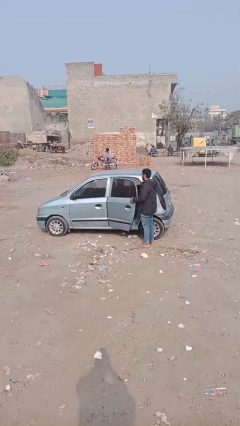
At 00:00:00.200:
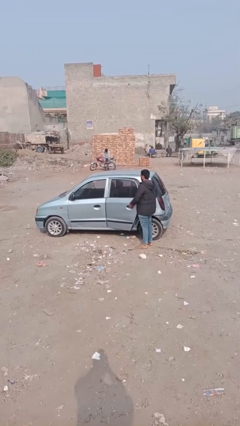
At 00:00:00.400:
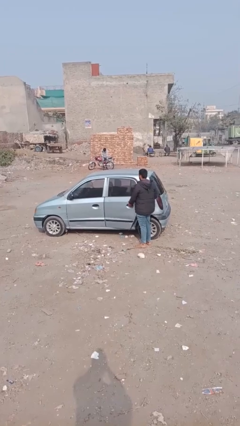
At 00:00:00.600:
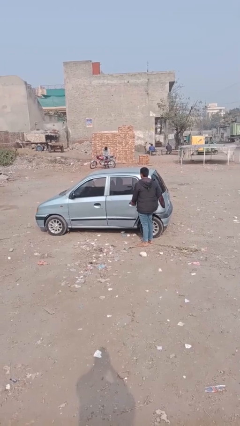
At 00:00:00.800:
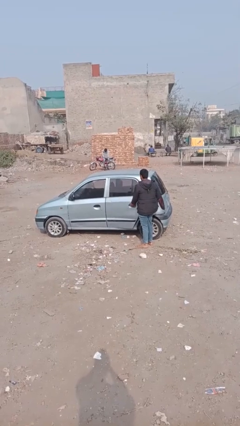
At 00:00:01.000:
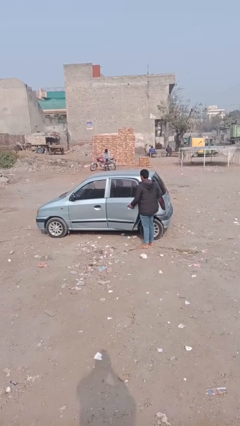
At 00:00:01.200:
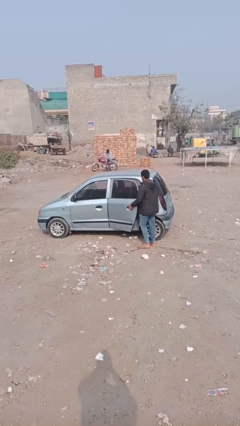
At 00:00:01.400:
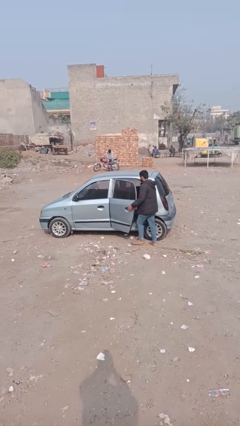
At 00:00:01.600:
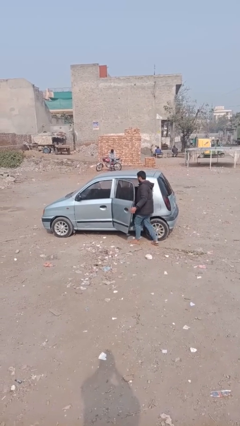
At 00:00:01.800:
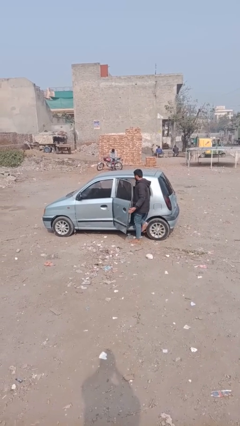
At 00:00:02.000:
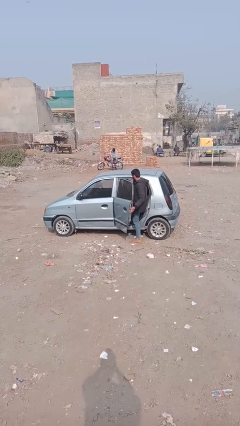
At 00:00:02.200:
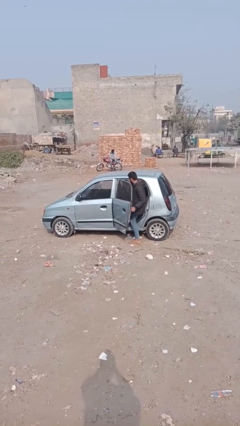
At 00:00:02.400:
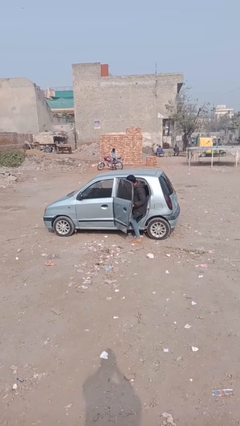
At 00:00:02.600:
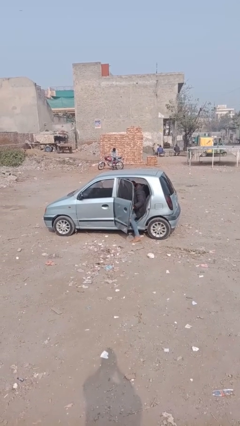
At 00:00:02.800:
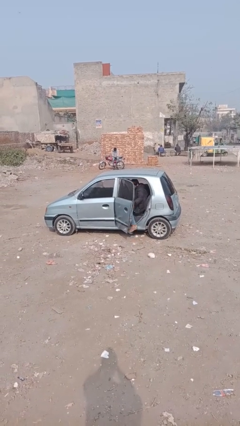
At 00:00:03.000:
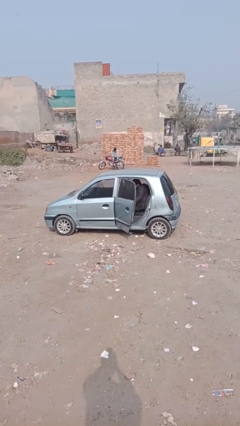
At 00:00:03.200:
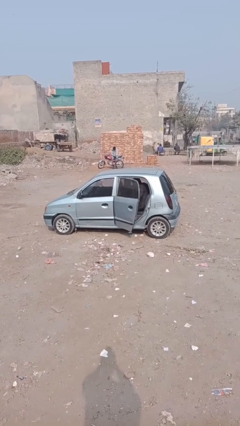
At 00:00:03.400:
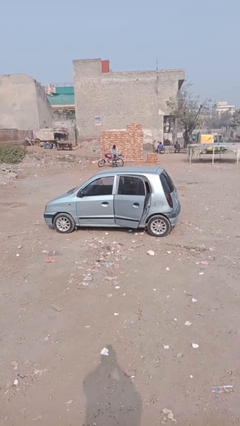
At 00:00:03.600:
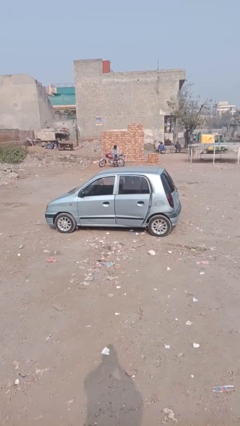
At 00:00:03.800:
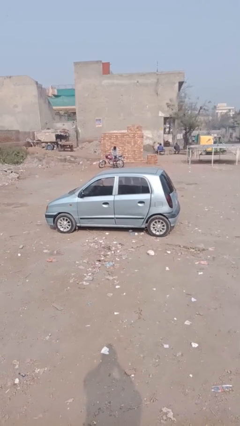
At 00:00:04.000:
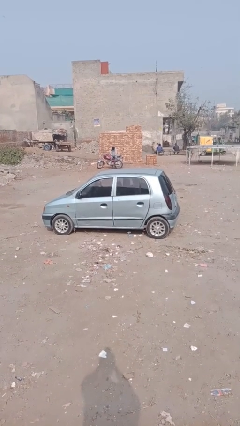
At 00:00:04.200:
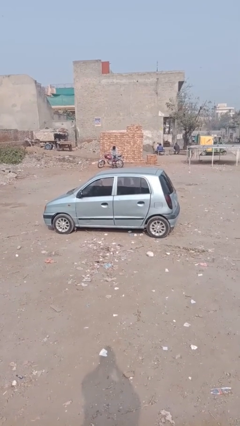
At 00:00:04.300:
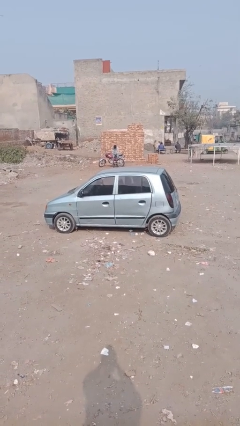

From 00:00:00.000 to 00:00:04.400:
car picks up person

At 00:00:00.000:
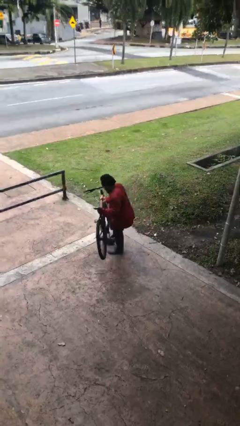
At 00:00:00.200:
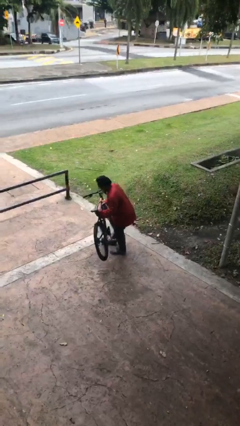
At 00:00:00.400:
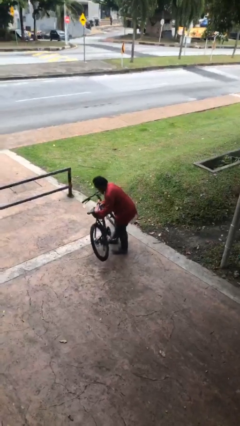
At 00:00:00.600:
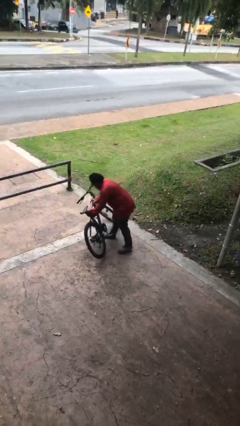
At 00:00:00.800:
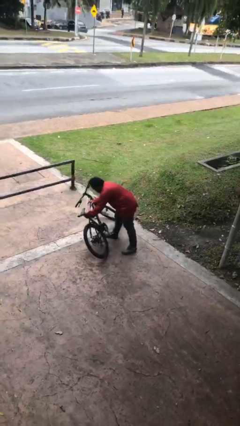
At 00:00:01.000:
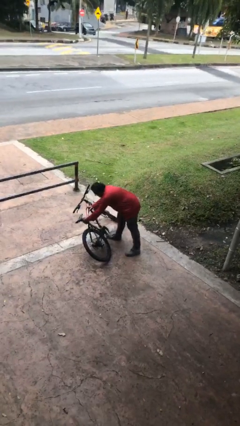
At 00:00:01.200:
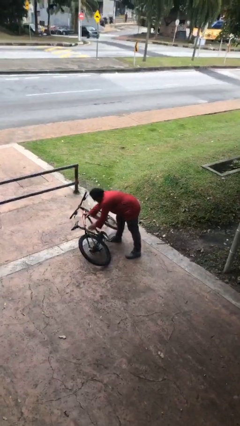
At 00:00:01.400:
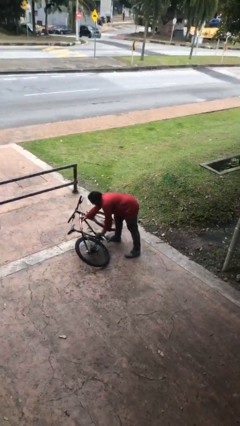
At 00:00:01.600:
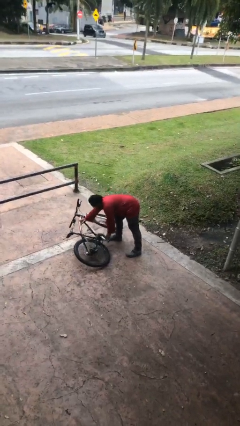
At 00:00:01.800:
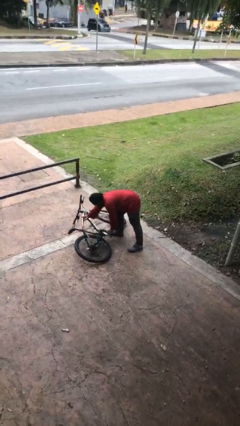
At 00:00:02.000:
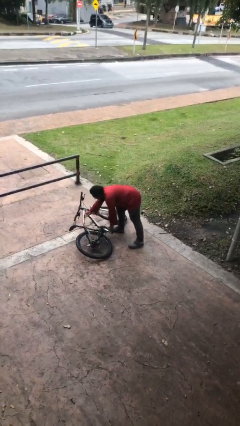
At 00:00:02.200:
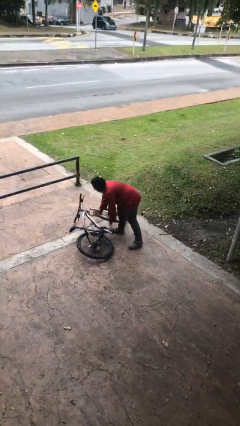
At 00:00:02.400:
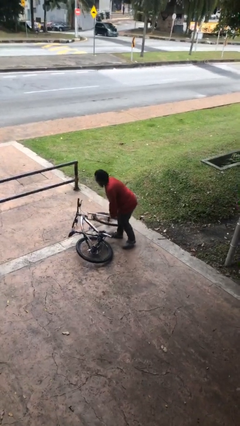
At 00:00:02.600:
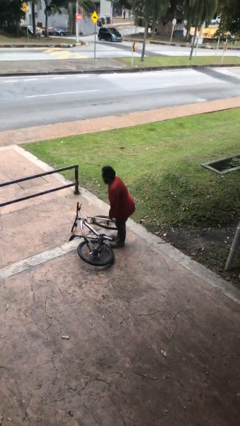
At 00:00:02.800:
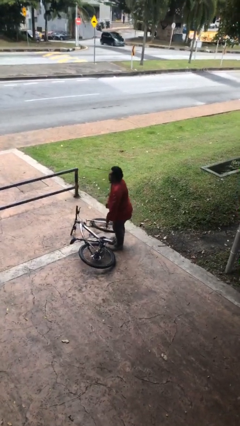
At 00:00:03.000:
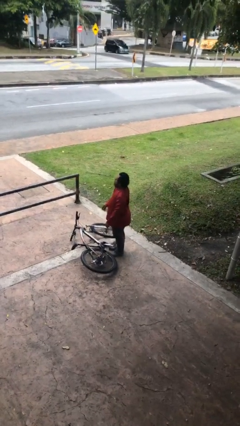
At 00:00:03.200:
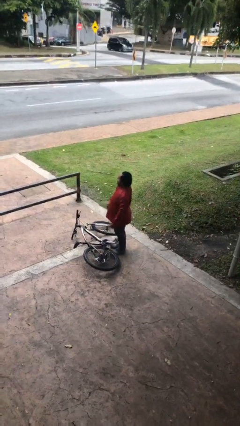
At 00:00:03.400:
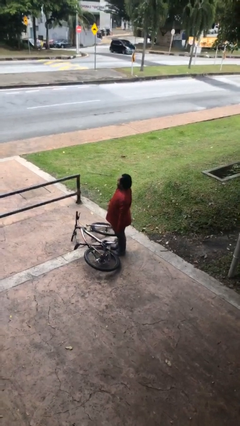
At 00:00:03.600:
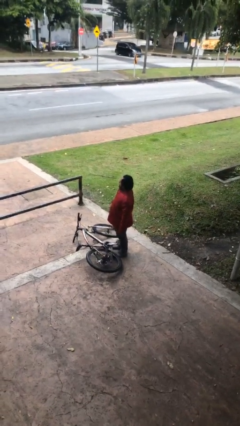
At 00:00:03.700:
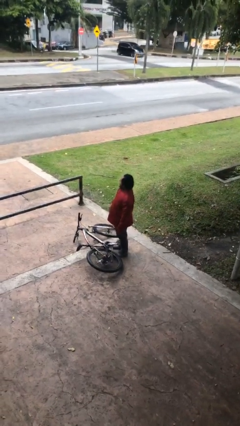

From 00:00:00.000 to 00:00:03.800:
person puts down object on floor

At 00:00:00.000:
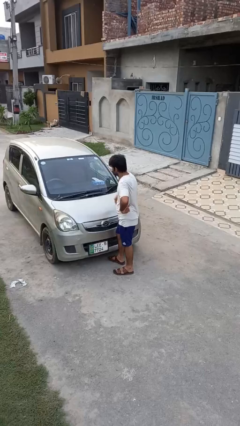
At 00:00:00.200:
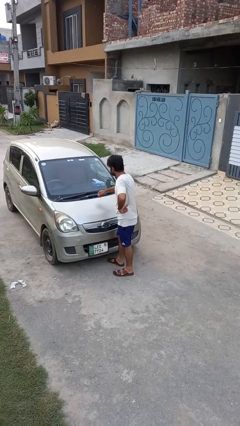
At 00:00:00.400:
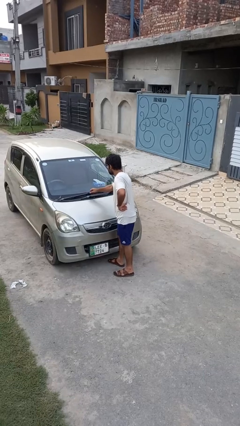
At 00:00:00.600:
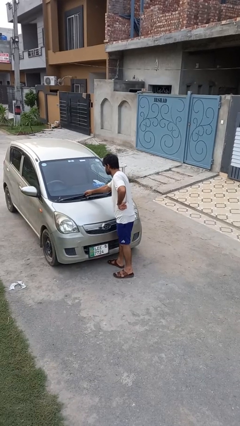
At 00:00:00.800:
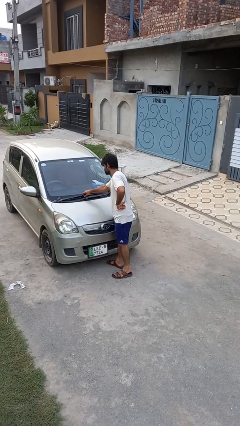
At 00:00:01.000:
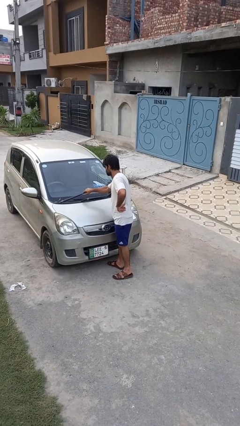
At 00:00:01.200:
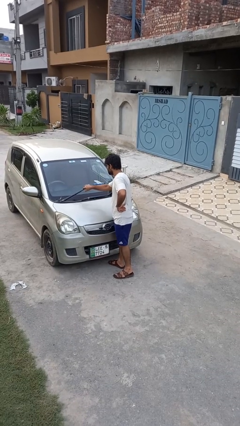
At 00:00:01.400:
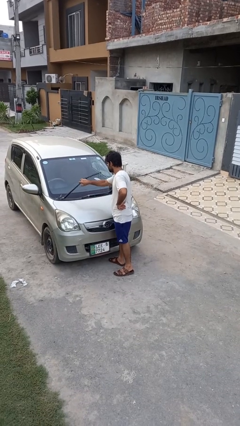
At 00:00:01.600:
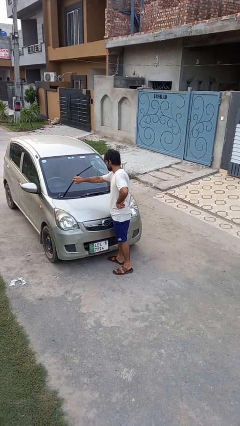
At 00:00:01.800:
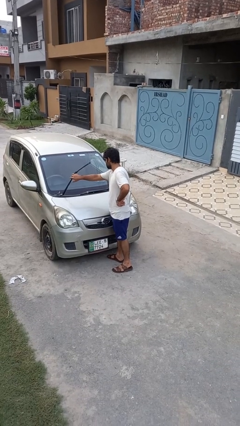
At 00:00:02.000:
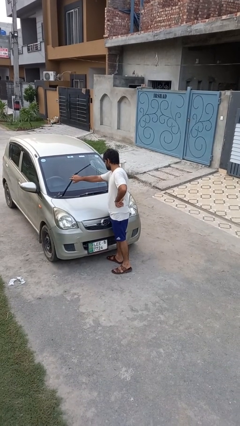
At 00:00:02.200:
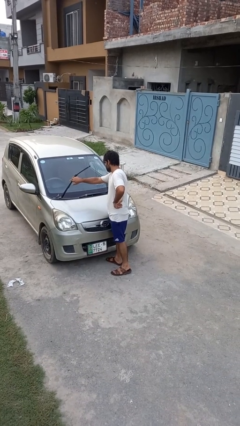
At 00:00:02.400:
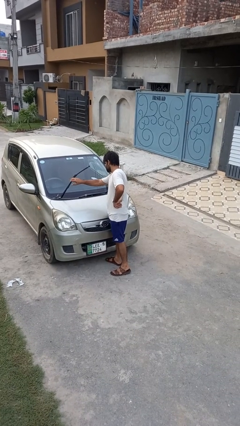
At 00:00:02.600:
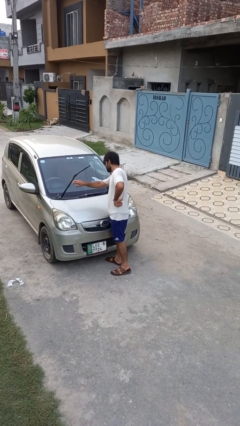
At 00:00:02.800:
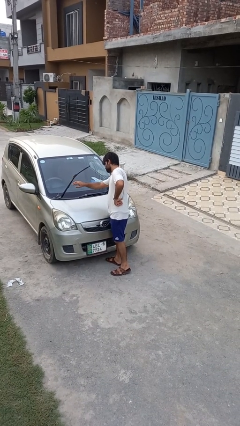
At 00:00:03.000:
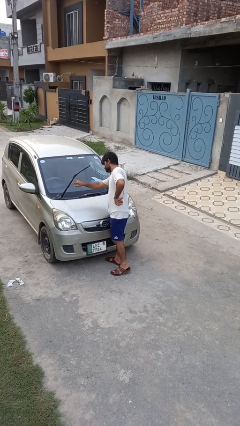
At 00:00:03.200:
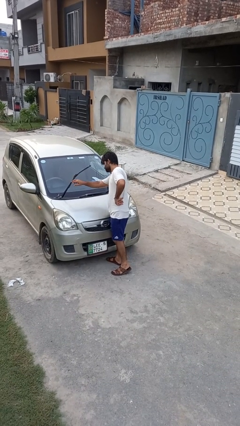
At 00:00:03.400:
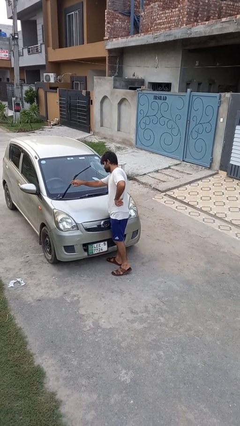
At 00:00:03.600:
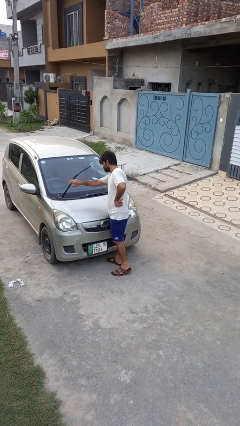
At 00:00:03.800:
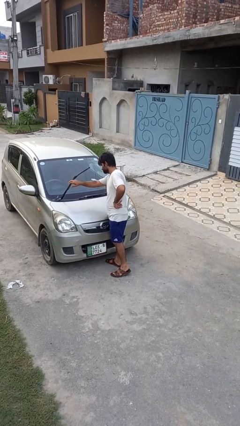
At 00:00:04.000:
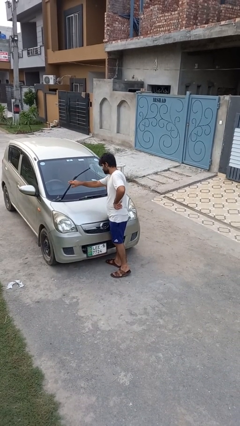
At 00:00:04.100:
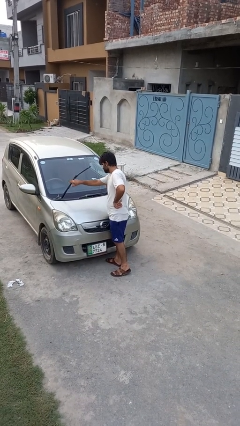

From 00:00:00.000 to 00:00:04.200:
person flips up car wipers

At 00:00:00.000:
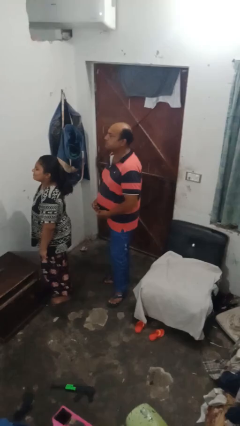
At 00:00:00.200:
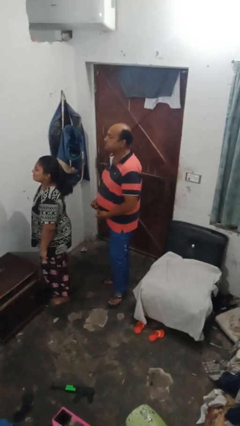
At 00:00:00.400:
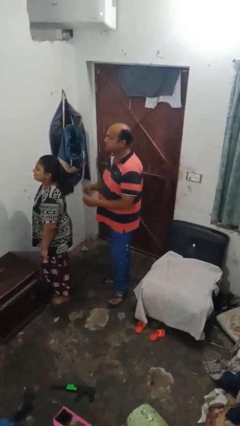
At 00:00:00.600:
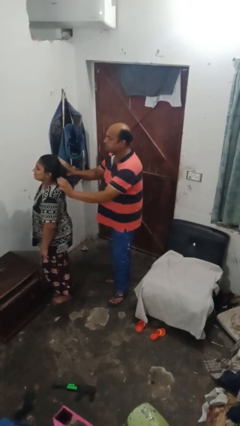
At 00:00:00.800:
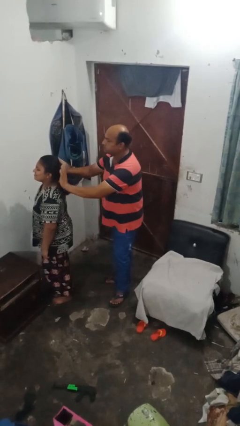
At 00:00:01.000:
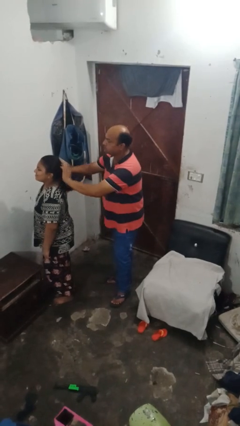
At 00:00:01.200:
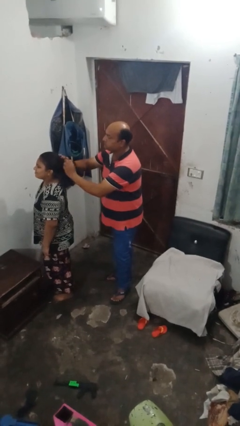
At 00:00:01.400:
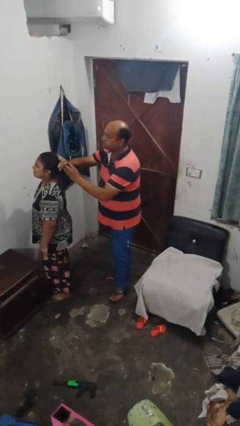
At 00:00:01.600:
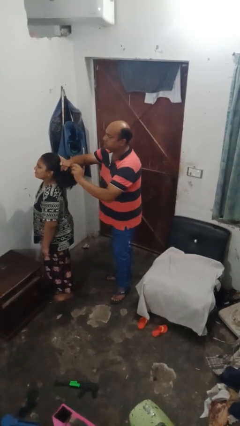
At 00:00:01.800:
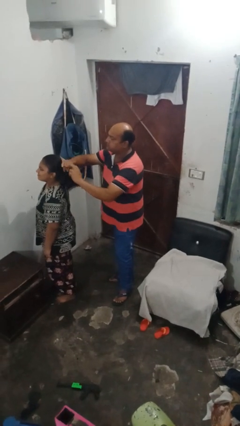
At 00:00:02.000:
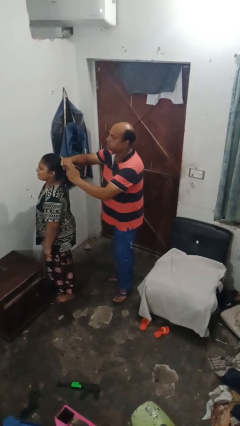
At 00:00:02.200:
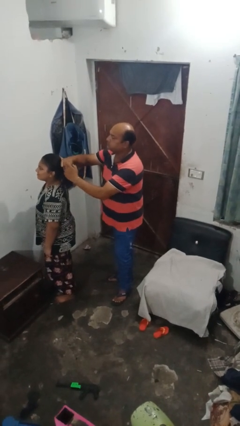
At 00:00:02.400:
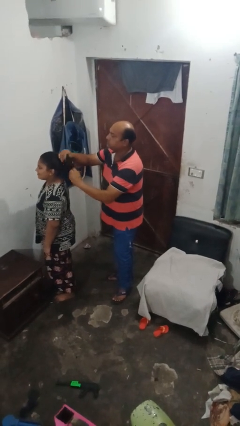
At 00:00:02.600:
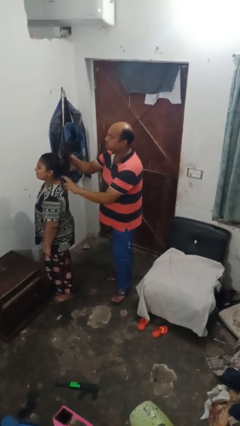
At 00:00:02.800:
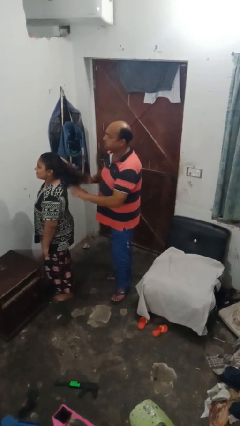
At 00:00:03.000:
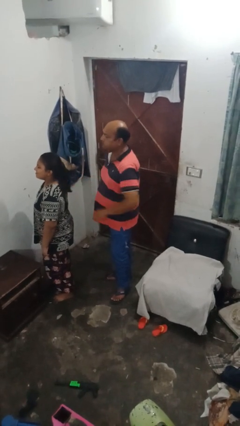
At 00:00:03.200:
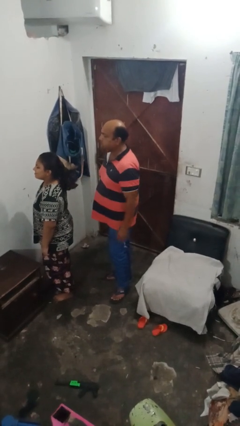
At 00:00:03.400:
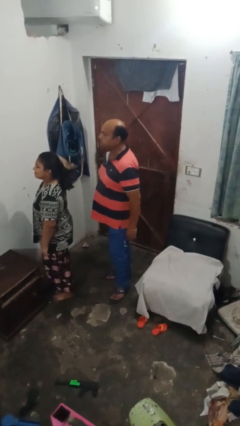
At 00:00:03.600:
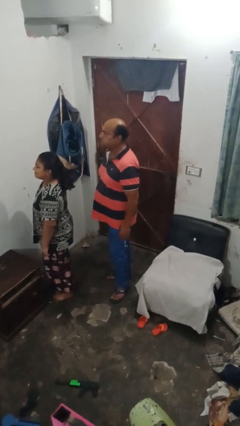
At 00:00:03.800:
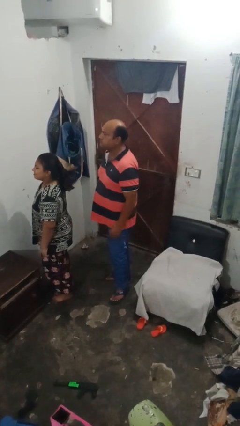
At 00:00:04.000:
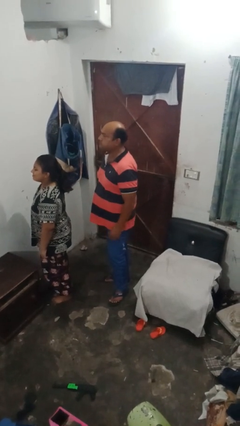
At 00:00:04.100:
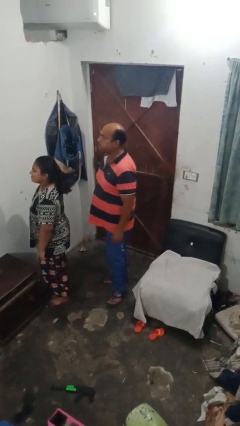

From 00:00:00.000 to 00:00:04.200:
person braids hair of person

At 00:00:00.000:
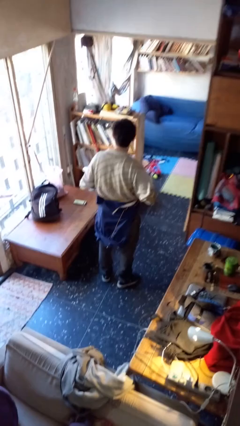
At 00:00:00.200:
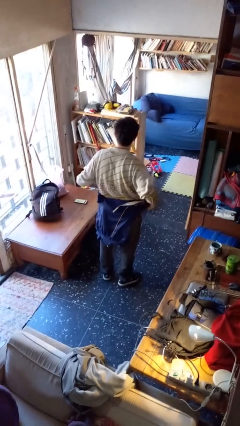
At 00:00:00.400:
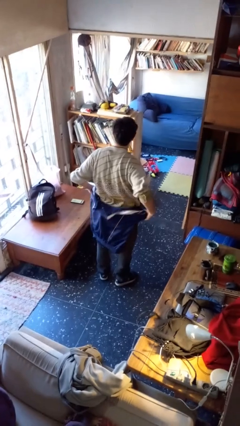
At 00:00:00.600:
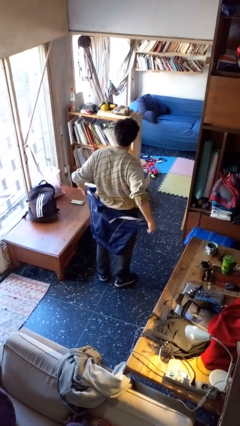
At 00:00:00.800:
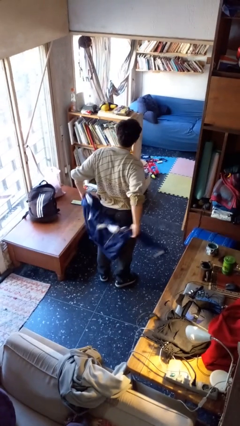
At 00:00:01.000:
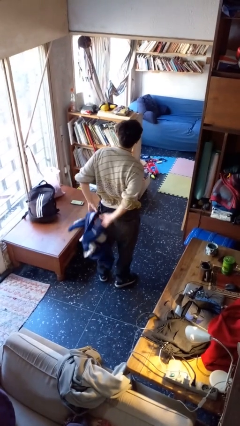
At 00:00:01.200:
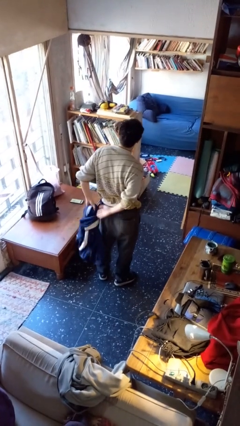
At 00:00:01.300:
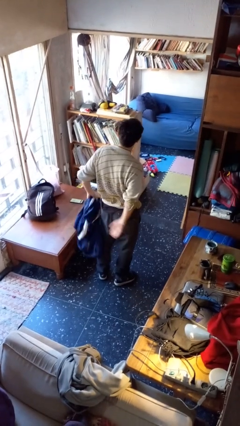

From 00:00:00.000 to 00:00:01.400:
person unties jacket around waist
